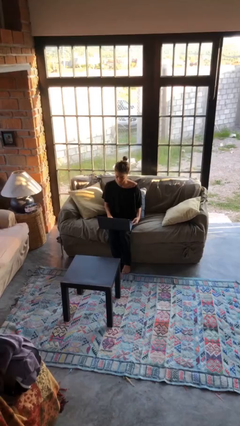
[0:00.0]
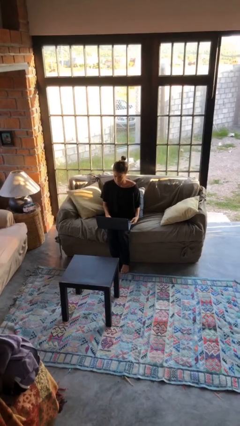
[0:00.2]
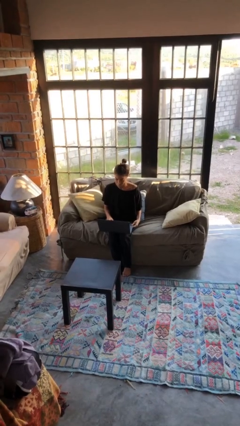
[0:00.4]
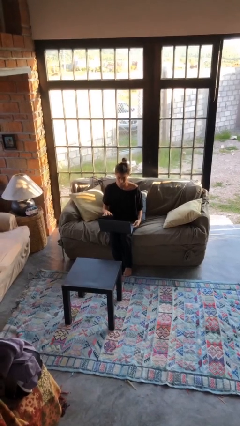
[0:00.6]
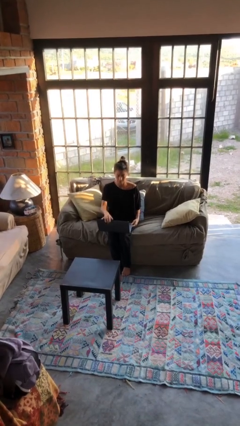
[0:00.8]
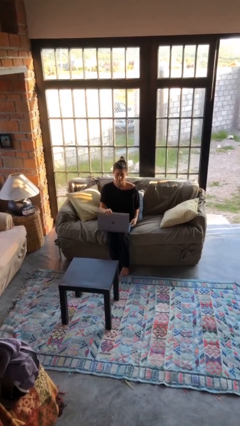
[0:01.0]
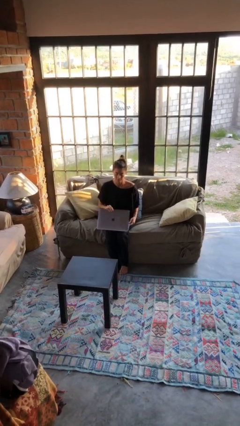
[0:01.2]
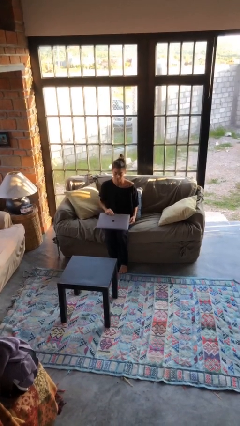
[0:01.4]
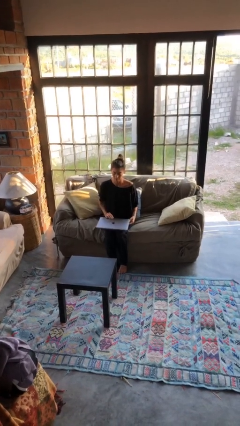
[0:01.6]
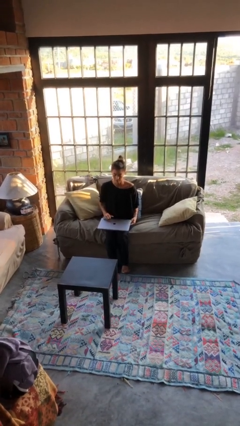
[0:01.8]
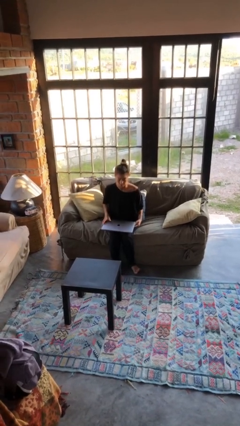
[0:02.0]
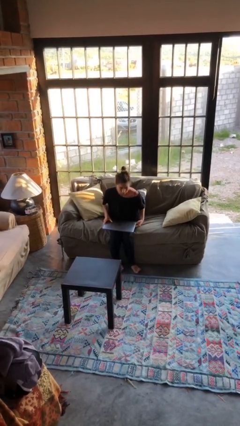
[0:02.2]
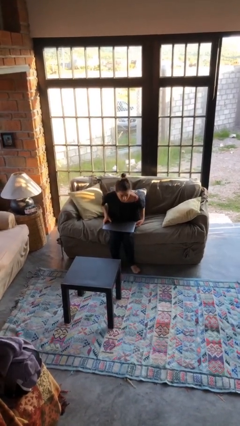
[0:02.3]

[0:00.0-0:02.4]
person closes laptop

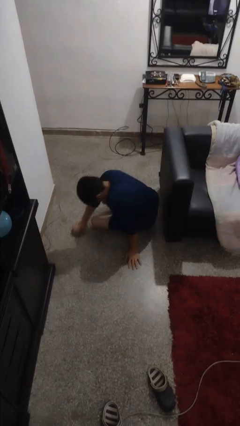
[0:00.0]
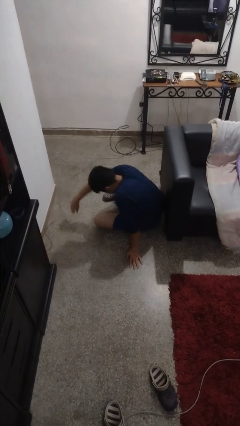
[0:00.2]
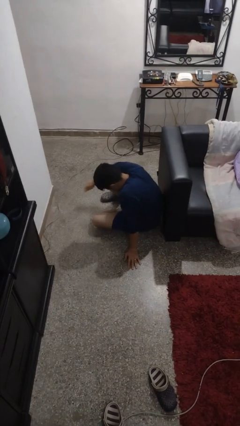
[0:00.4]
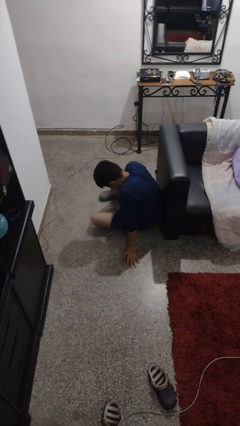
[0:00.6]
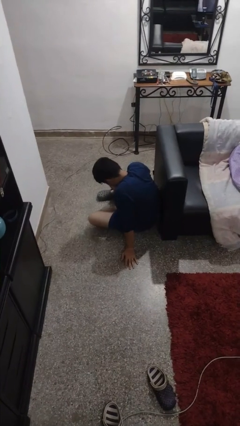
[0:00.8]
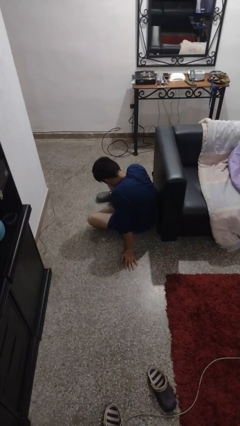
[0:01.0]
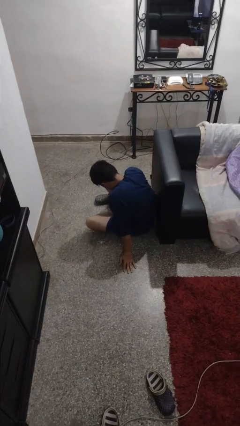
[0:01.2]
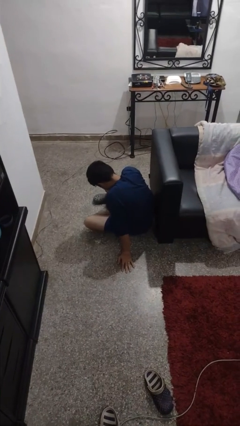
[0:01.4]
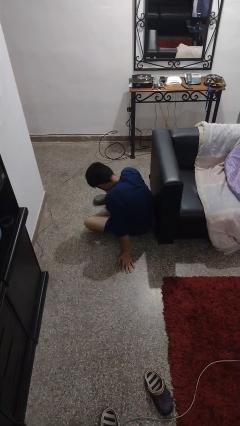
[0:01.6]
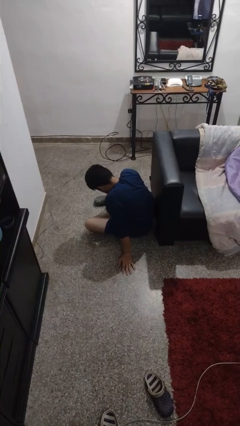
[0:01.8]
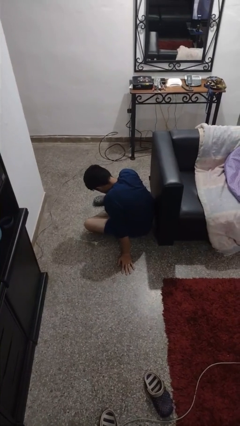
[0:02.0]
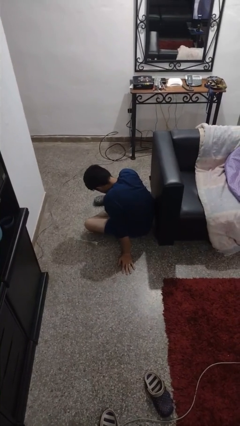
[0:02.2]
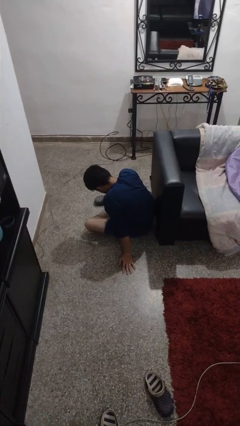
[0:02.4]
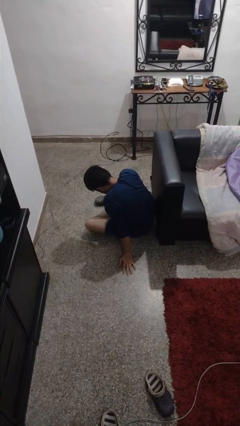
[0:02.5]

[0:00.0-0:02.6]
person lies down on floor

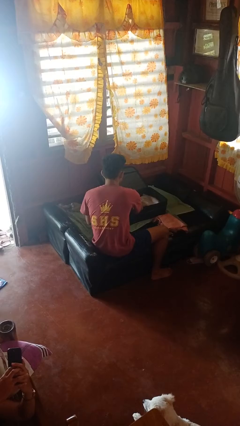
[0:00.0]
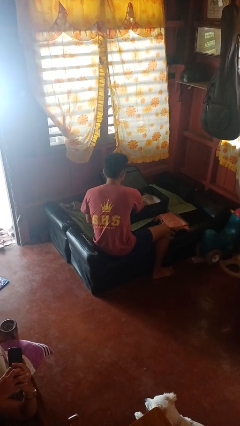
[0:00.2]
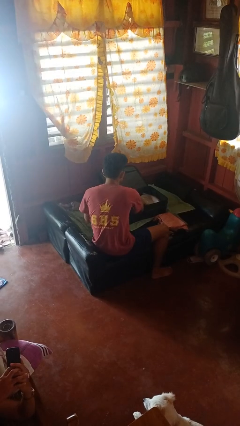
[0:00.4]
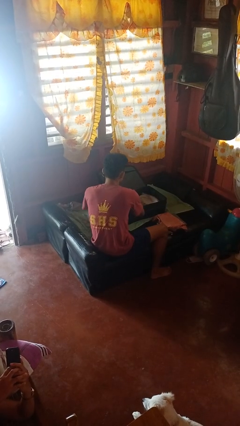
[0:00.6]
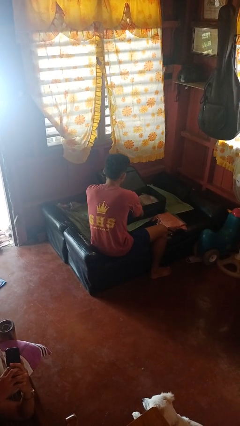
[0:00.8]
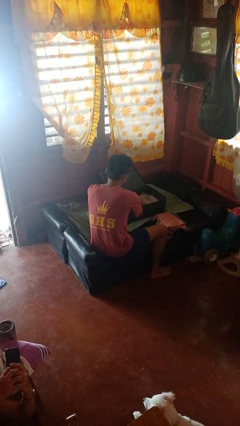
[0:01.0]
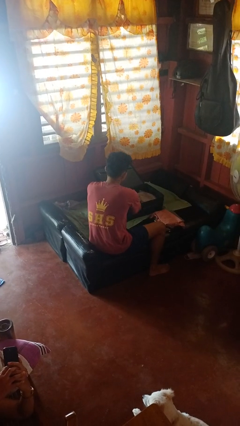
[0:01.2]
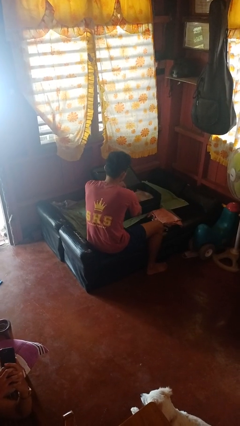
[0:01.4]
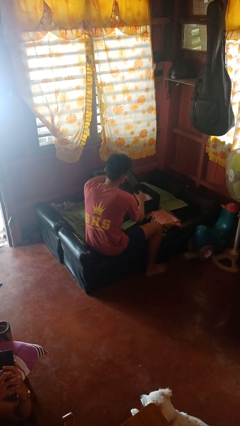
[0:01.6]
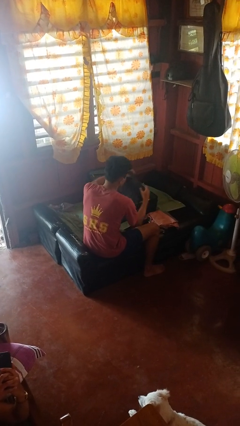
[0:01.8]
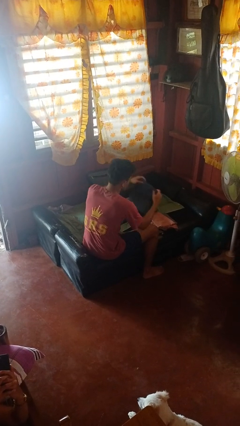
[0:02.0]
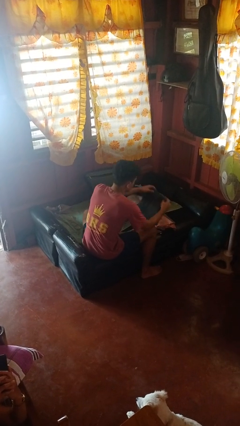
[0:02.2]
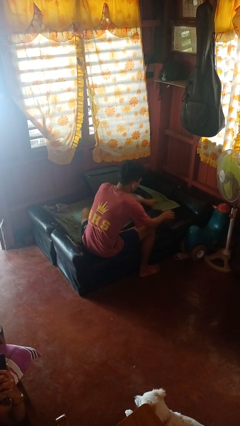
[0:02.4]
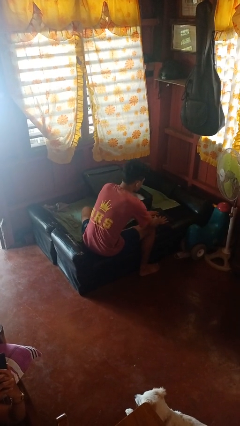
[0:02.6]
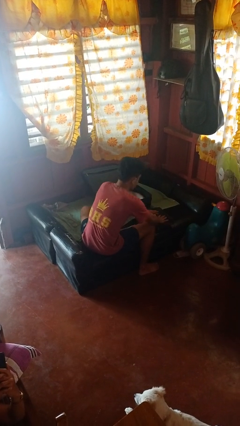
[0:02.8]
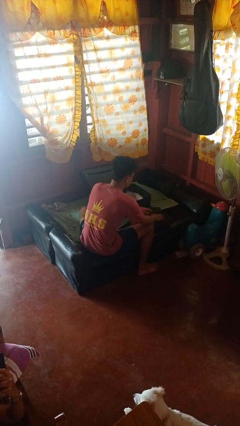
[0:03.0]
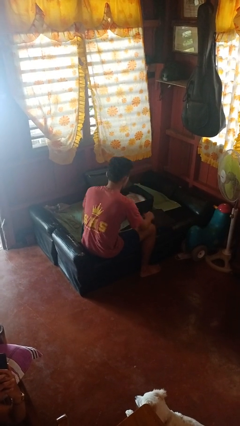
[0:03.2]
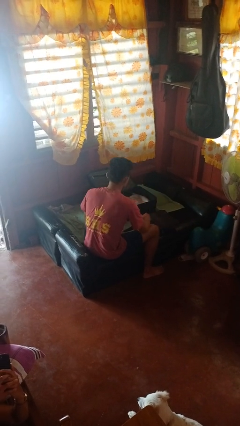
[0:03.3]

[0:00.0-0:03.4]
person unloads clothes from suitcase

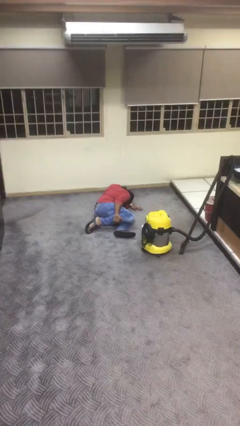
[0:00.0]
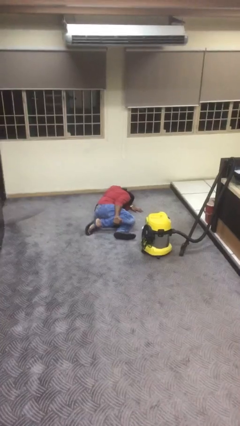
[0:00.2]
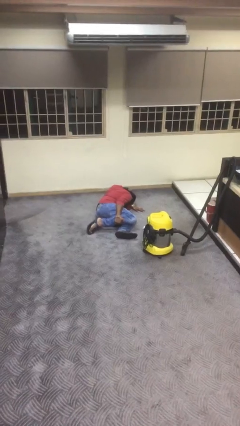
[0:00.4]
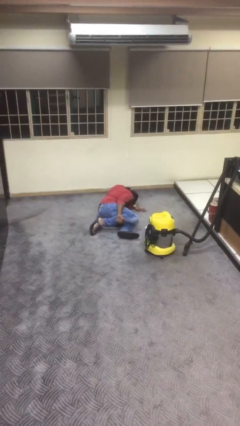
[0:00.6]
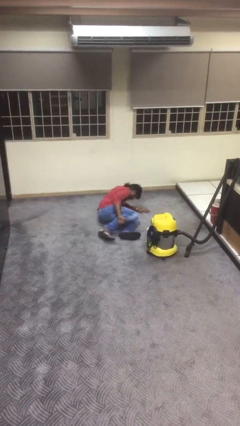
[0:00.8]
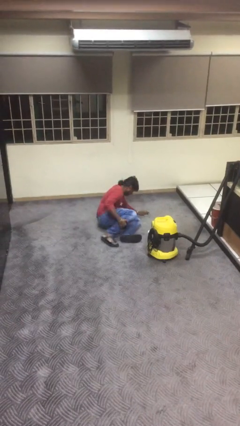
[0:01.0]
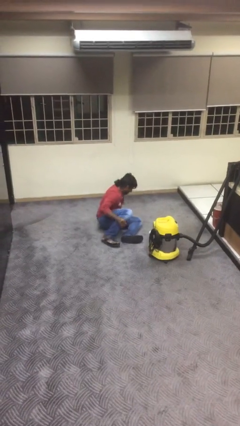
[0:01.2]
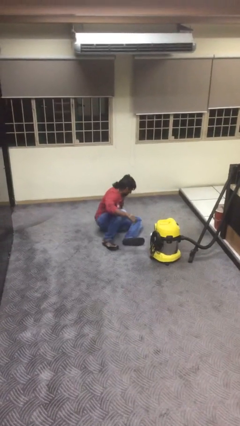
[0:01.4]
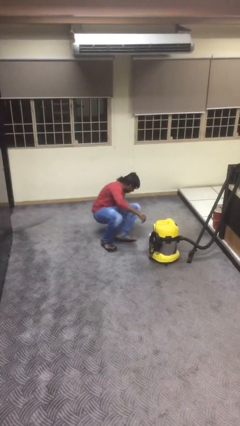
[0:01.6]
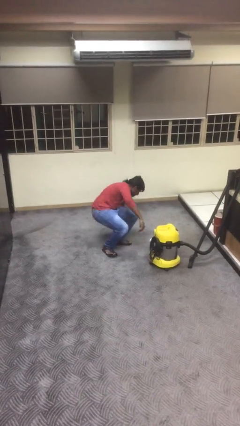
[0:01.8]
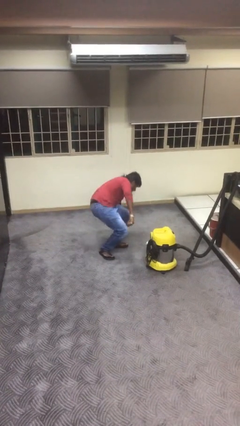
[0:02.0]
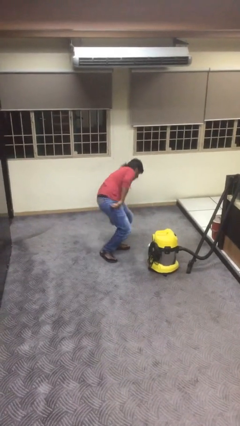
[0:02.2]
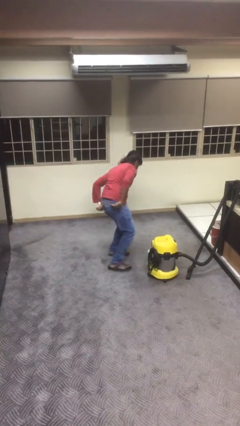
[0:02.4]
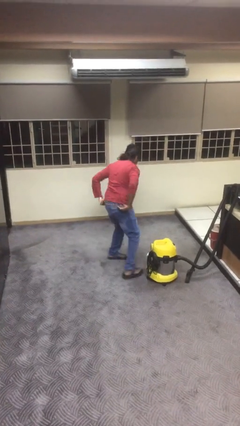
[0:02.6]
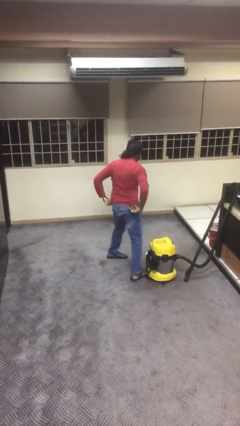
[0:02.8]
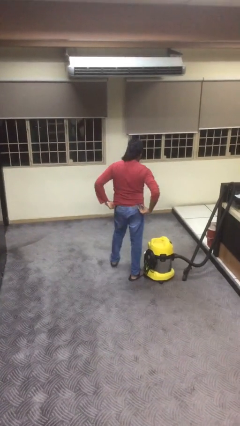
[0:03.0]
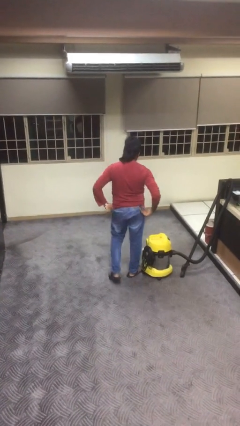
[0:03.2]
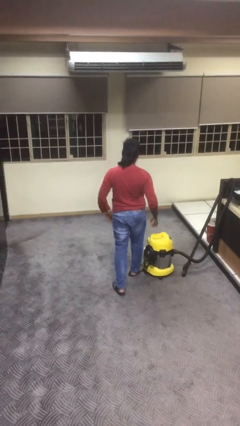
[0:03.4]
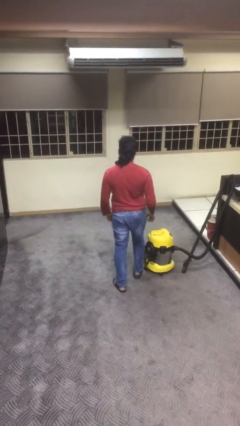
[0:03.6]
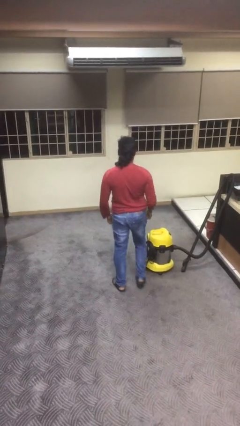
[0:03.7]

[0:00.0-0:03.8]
person stands up from floor

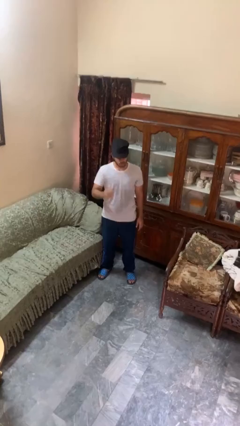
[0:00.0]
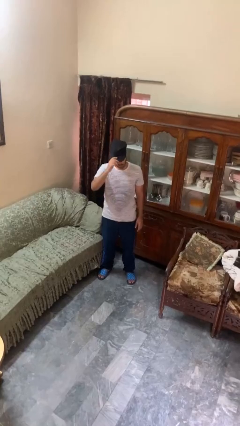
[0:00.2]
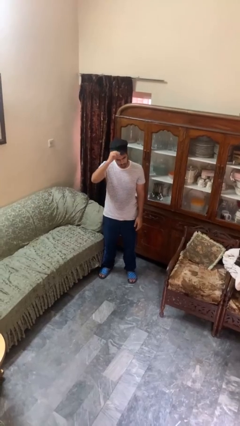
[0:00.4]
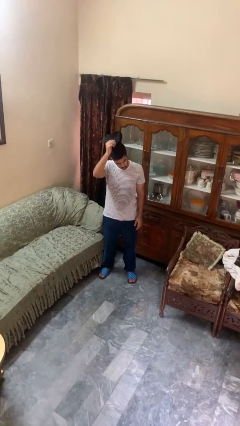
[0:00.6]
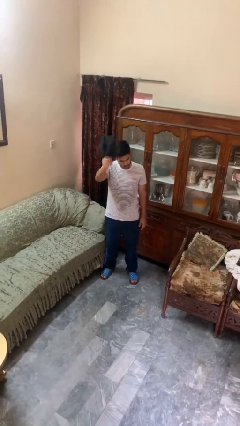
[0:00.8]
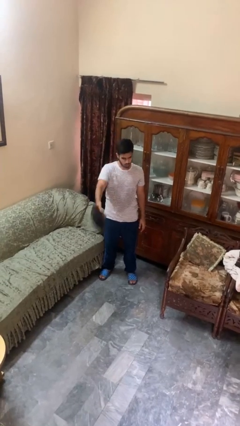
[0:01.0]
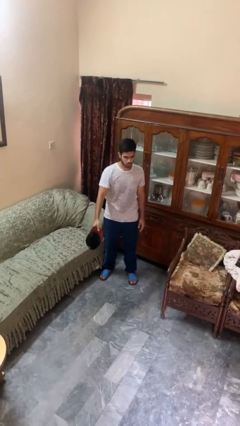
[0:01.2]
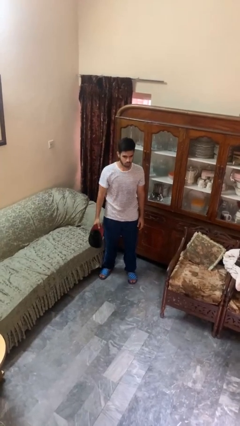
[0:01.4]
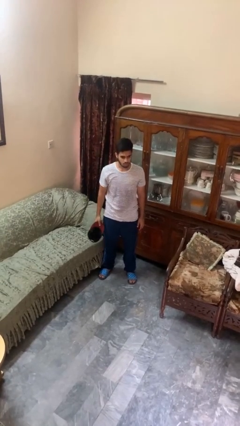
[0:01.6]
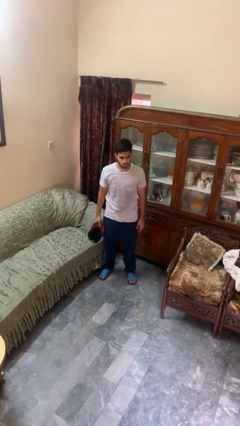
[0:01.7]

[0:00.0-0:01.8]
person takes off hat

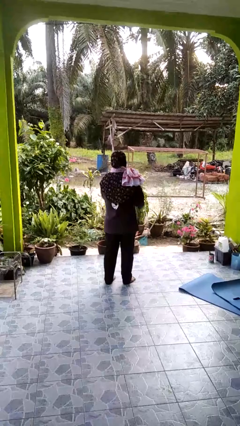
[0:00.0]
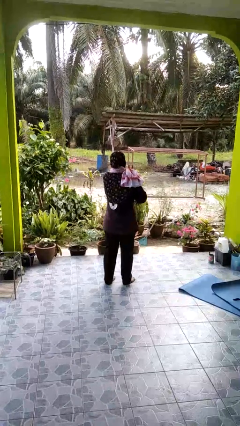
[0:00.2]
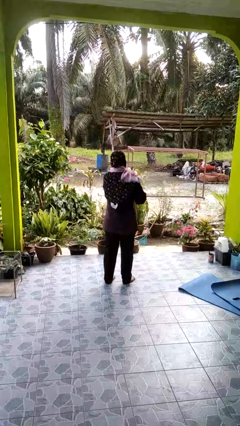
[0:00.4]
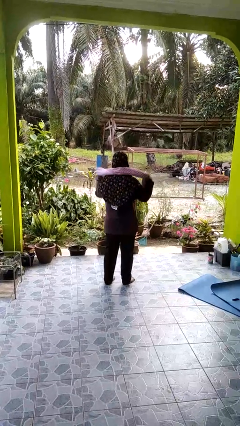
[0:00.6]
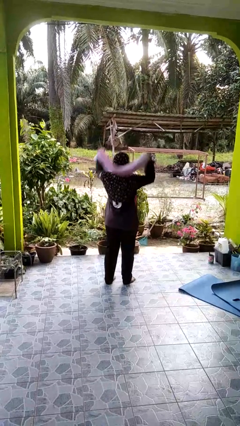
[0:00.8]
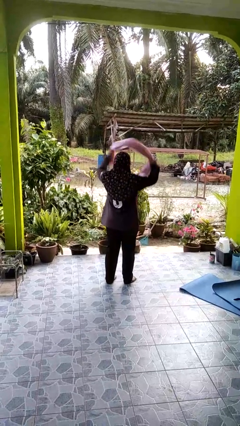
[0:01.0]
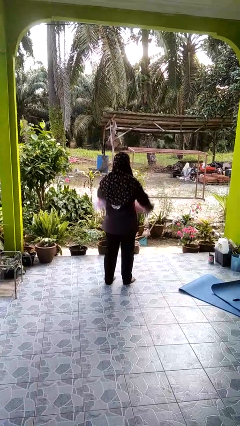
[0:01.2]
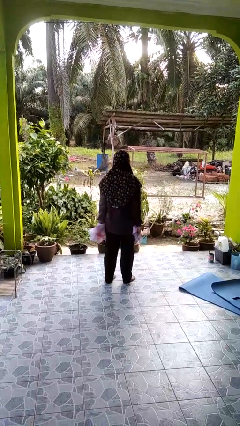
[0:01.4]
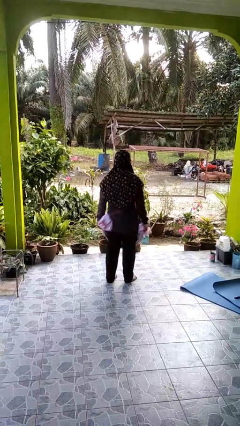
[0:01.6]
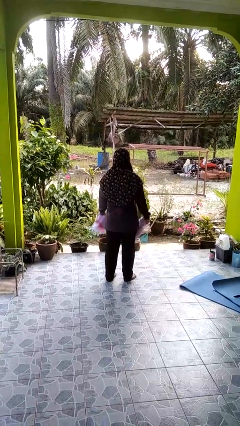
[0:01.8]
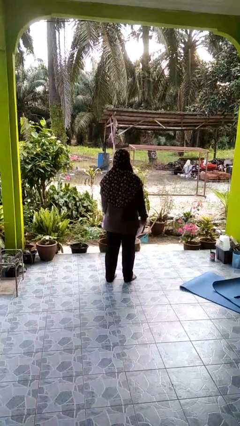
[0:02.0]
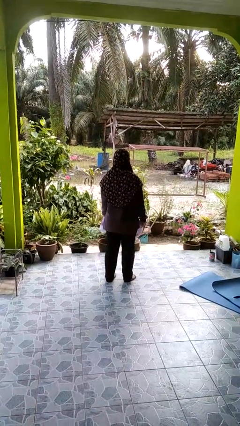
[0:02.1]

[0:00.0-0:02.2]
person takes off scarf

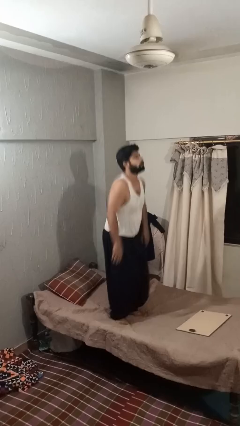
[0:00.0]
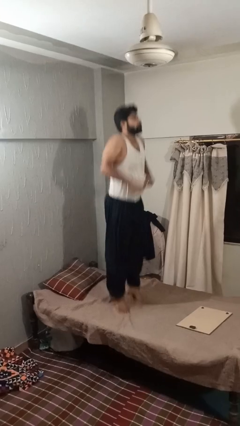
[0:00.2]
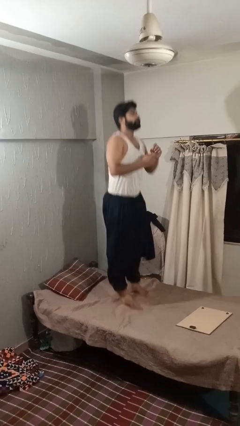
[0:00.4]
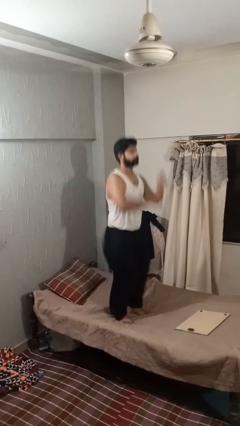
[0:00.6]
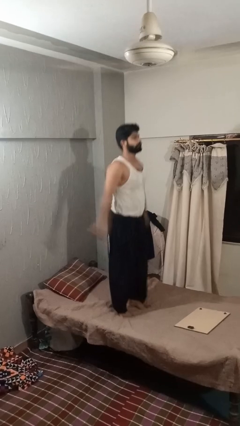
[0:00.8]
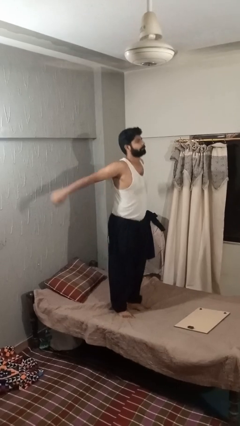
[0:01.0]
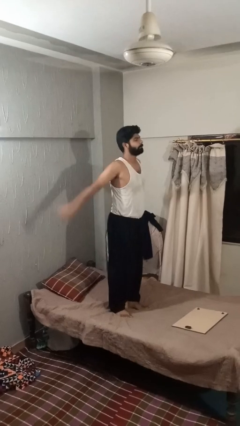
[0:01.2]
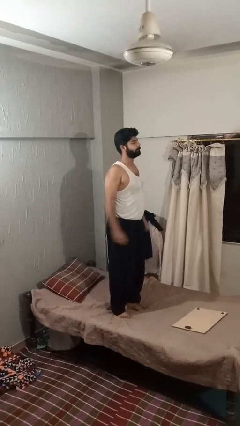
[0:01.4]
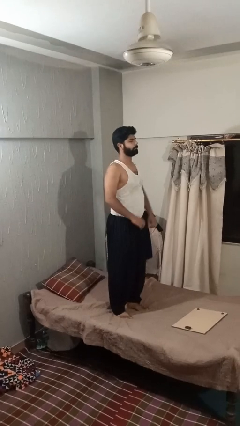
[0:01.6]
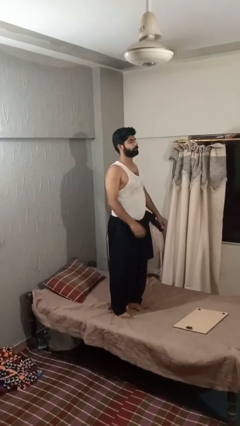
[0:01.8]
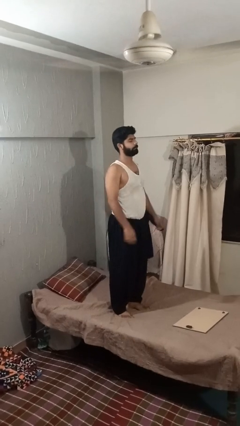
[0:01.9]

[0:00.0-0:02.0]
person jumps on bed
